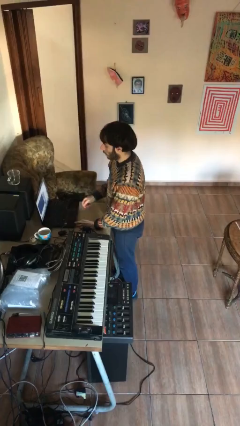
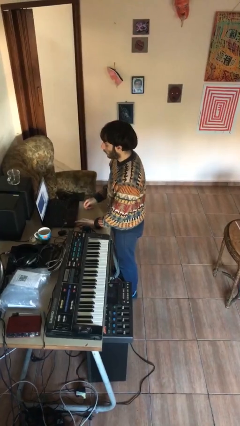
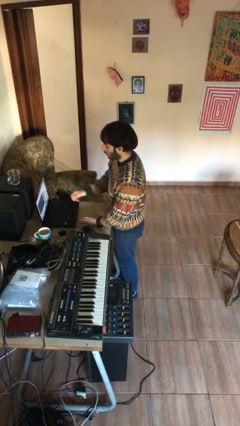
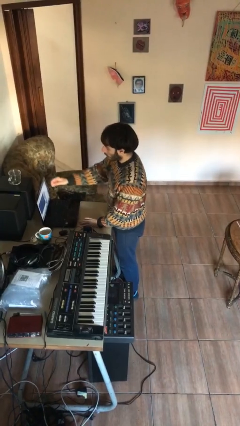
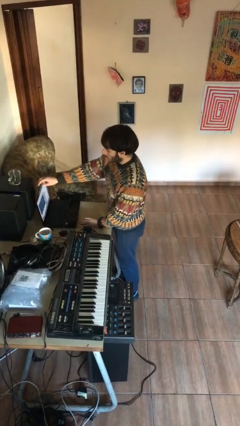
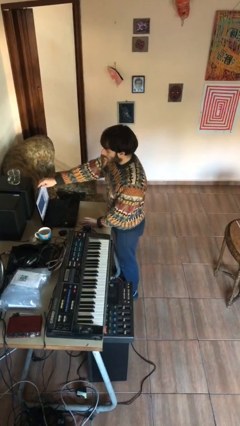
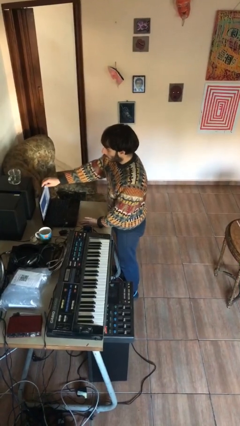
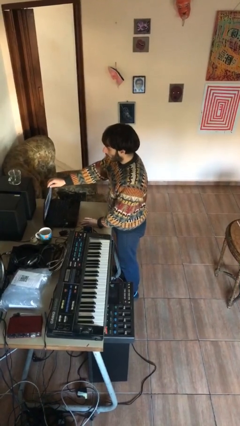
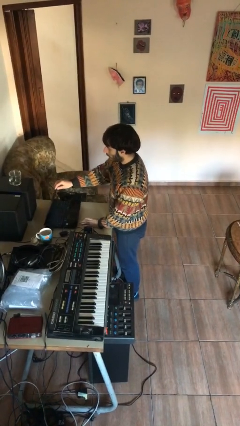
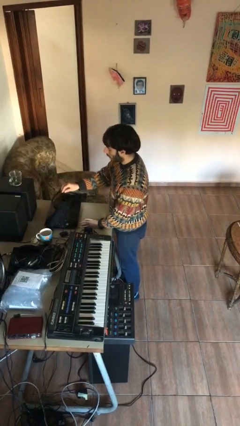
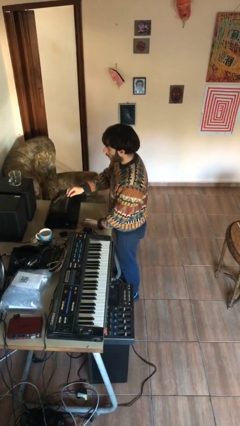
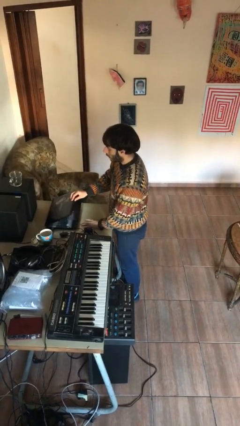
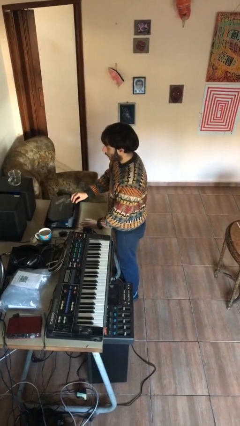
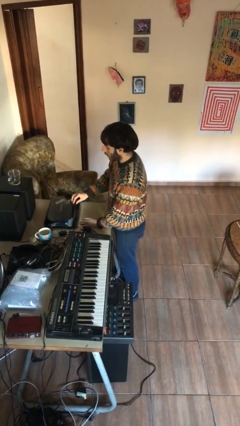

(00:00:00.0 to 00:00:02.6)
person closes laptop

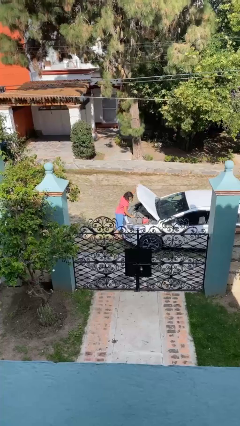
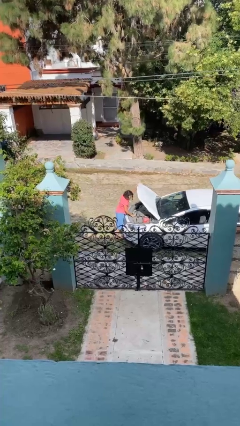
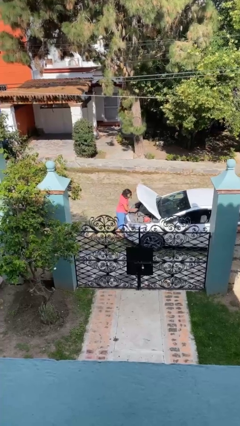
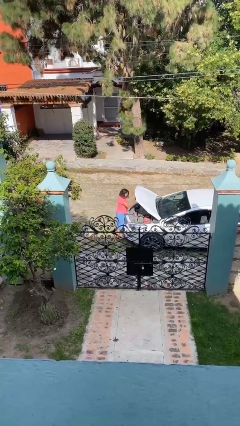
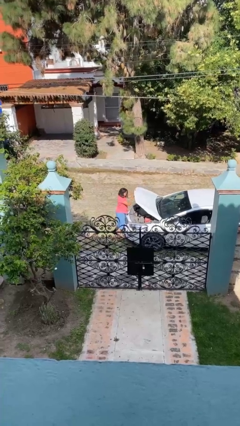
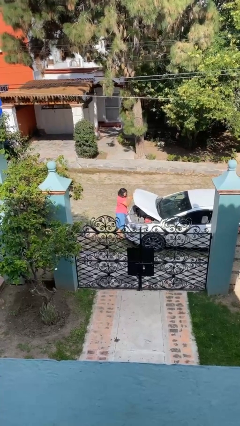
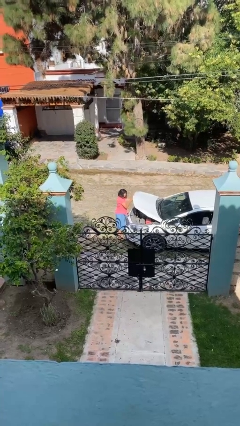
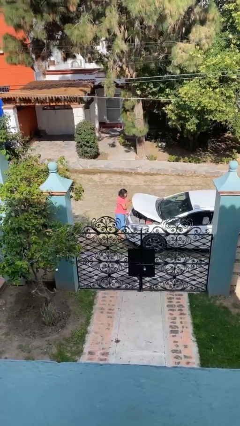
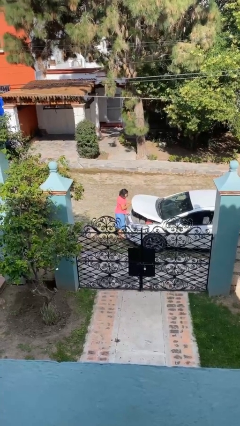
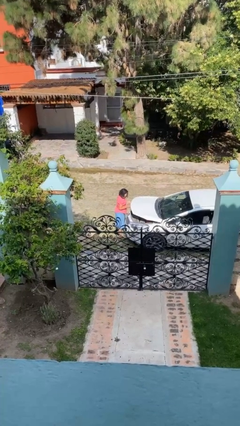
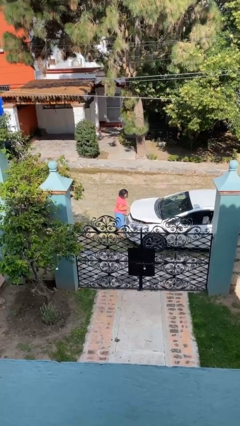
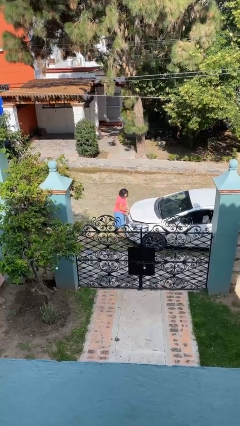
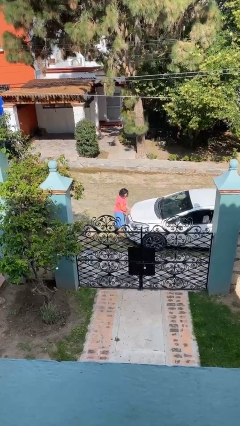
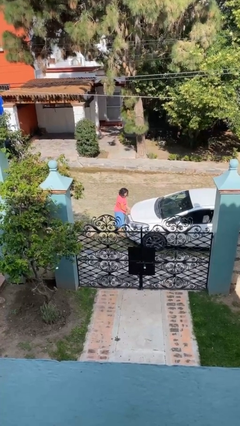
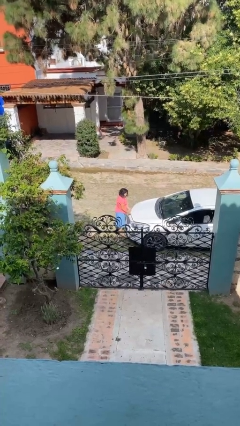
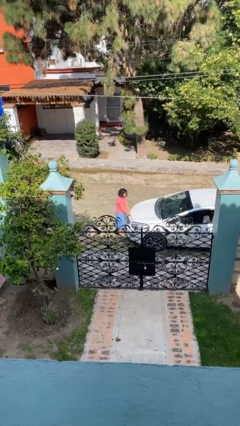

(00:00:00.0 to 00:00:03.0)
person closes car hood

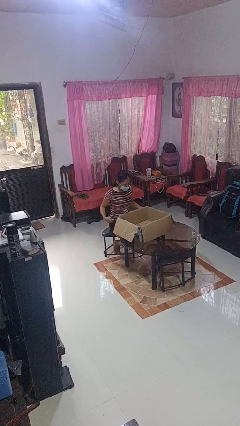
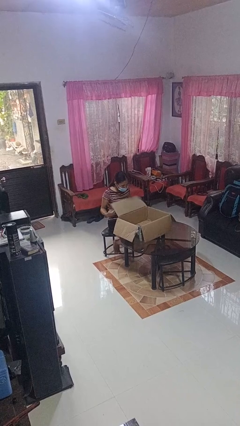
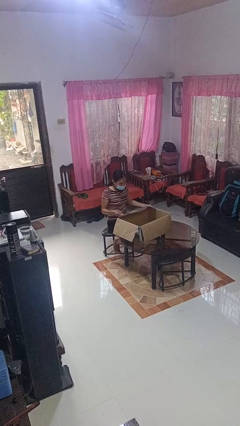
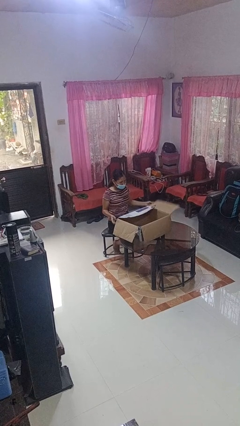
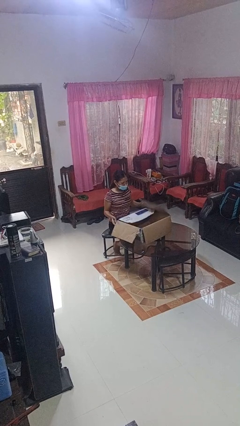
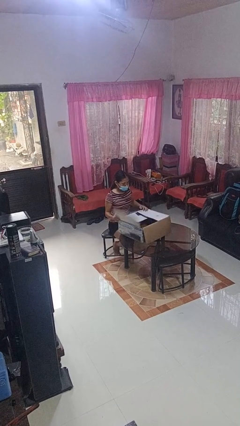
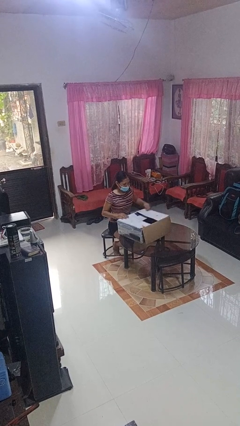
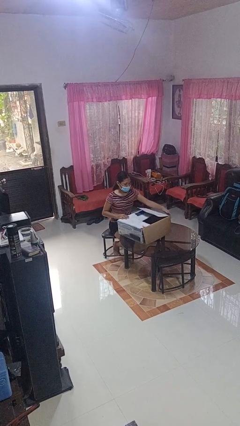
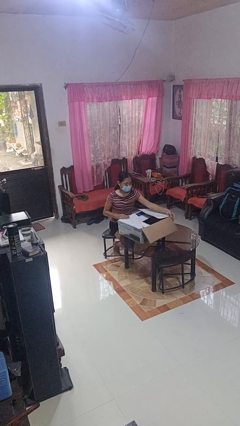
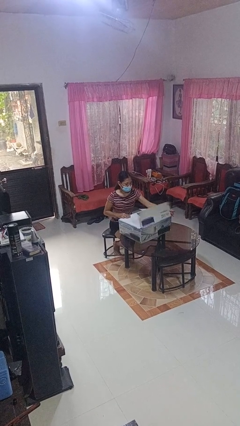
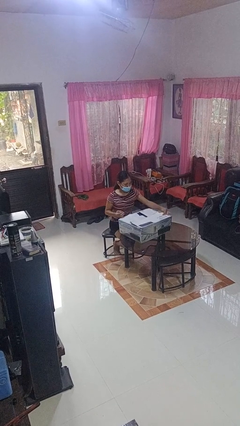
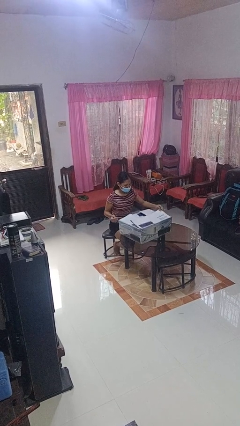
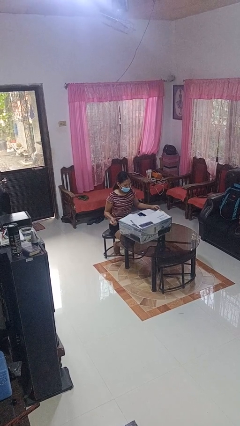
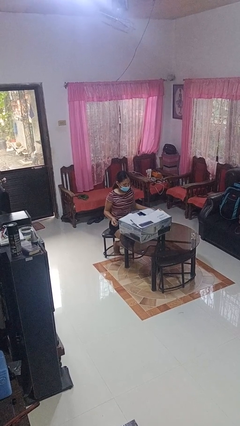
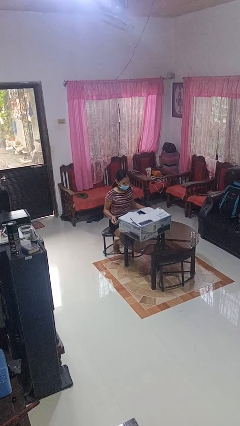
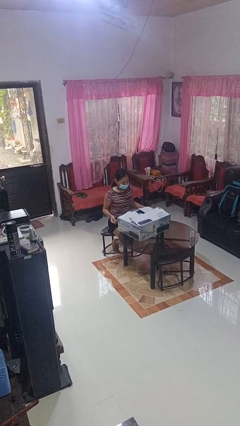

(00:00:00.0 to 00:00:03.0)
person closes box

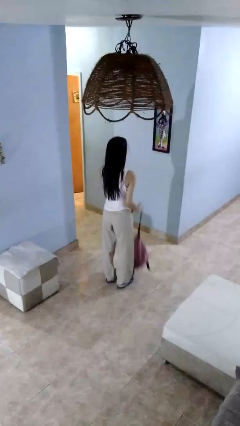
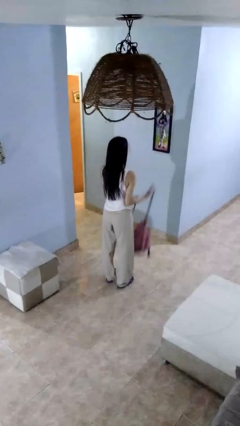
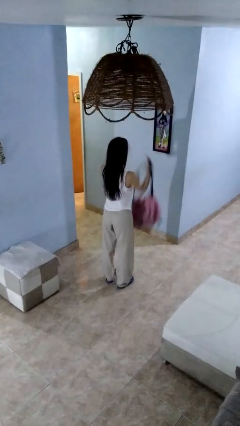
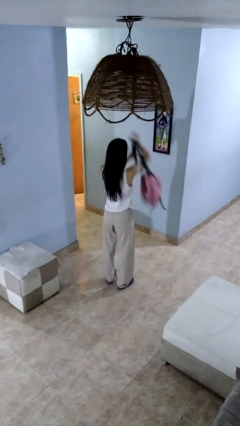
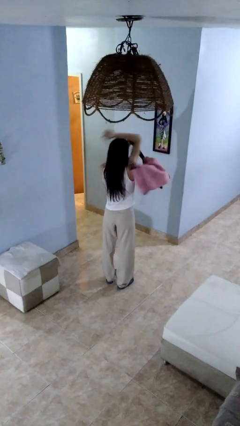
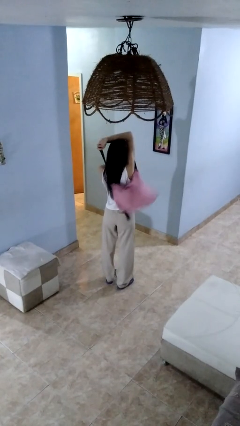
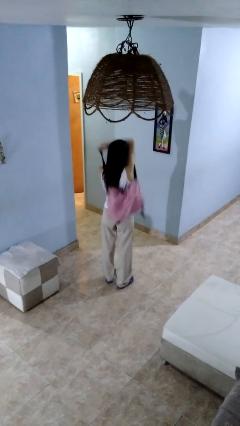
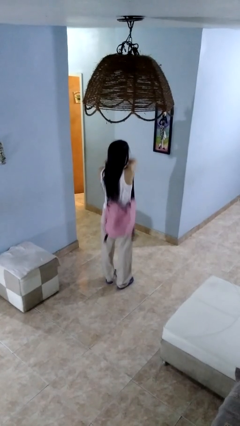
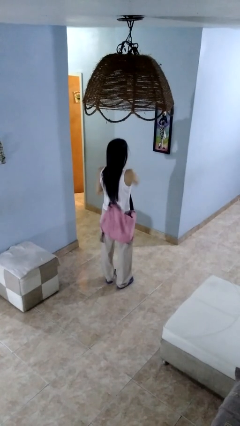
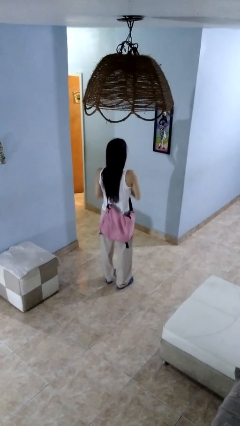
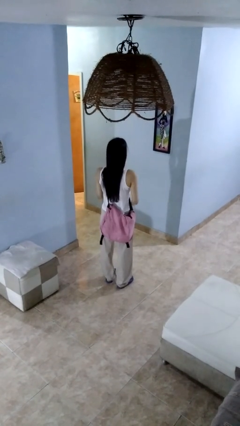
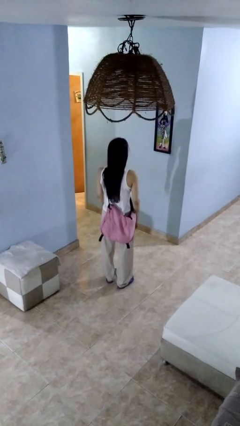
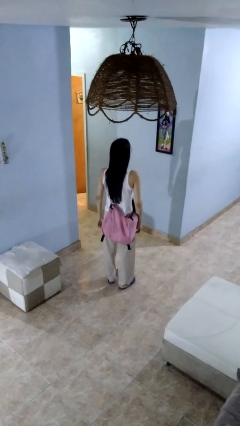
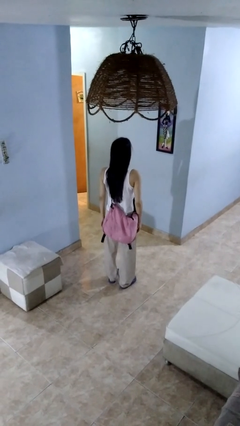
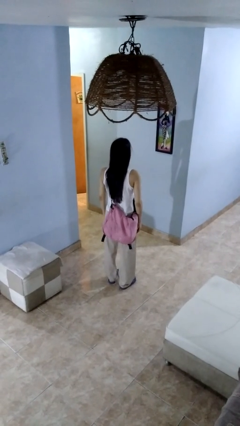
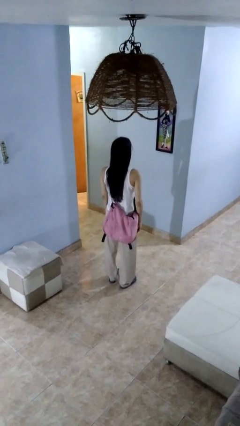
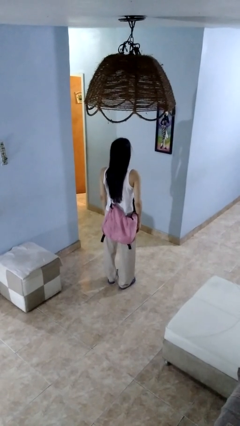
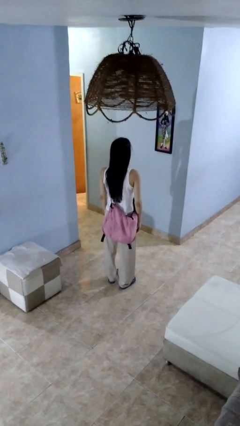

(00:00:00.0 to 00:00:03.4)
person puts on backpack

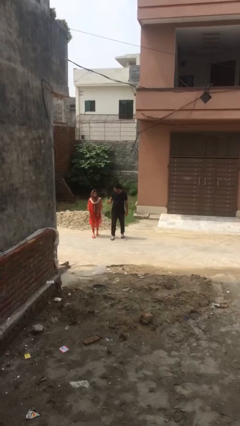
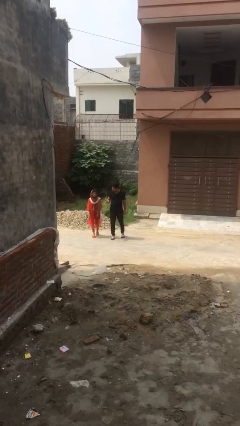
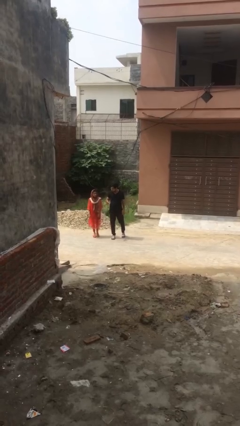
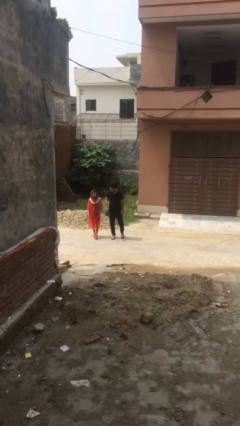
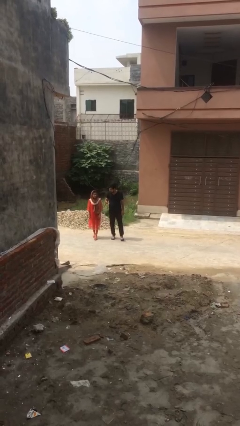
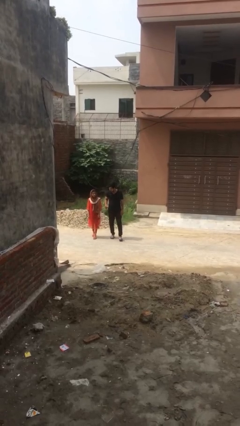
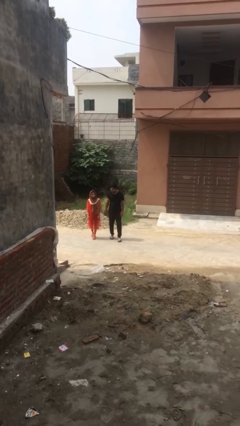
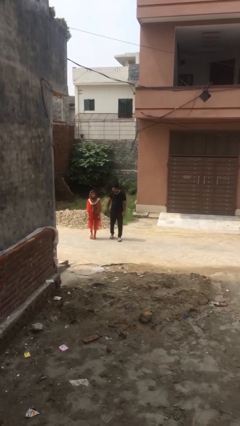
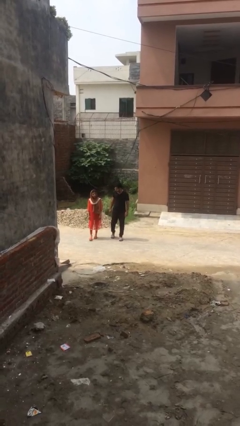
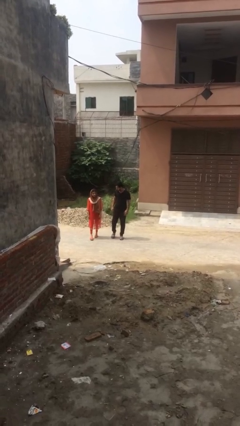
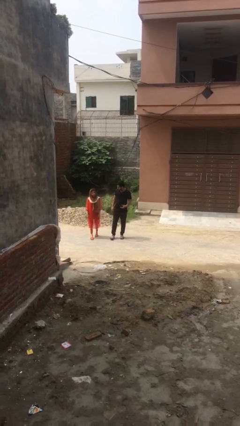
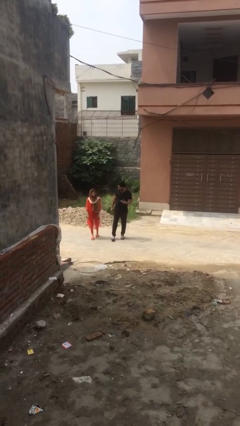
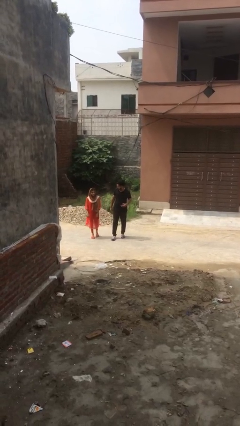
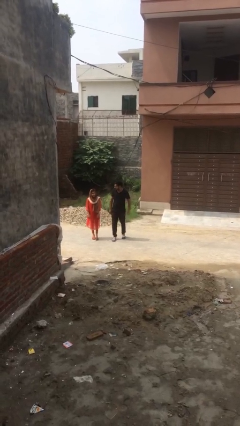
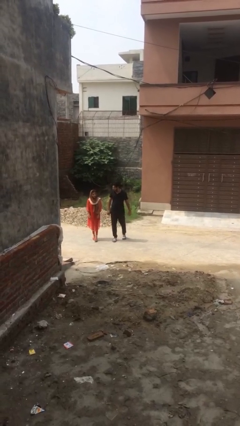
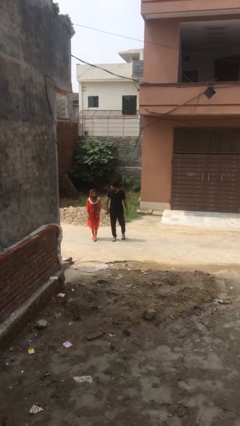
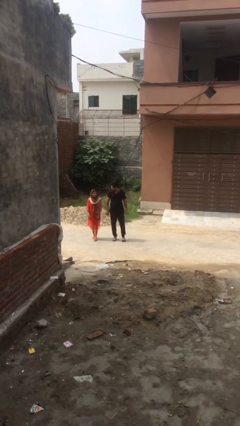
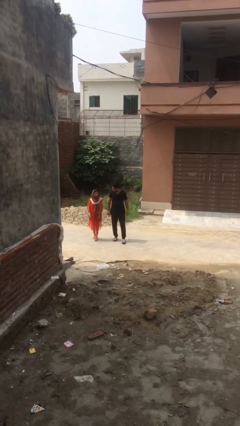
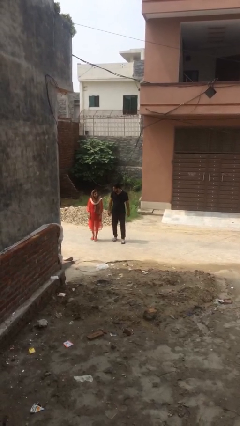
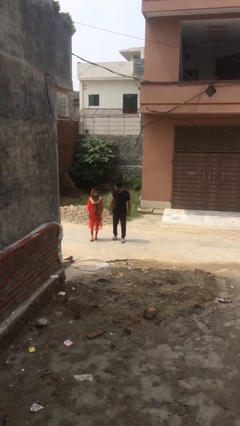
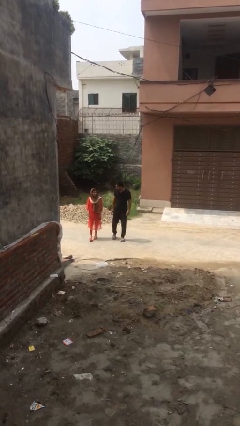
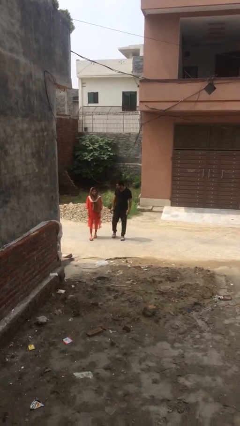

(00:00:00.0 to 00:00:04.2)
person talks to person

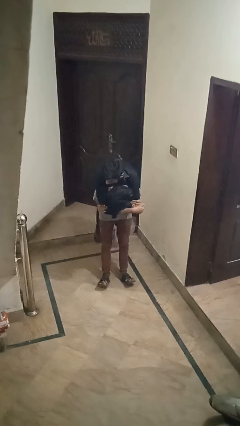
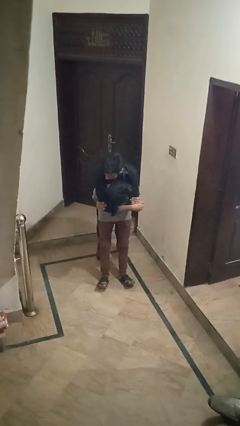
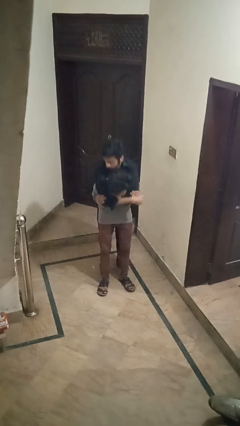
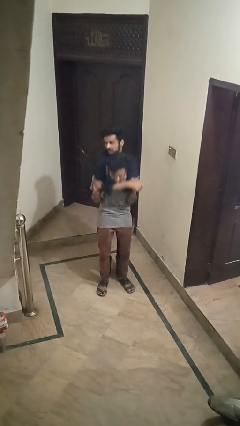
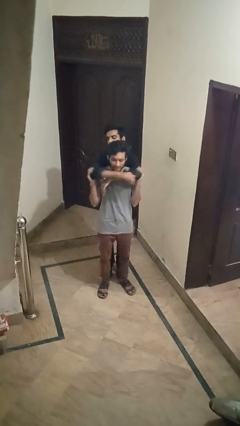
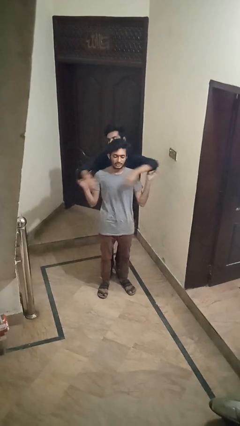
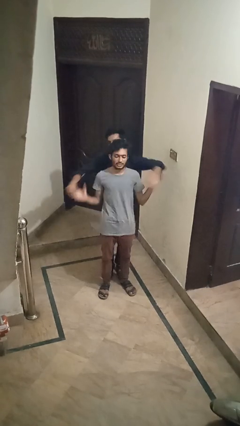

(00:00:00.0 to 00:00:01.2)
person puts down person
